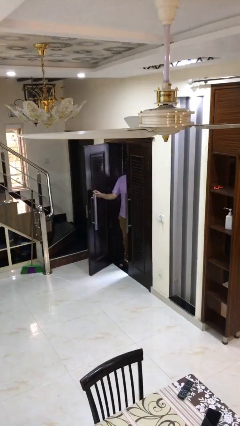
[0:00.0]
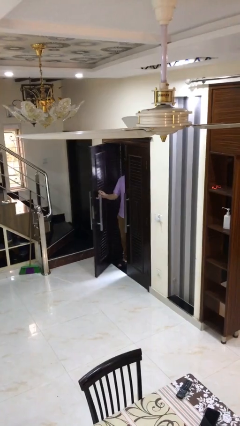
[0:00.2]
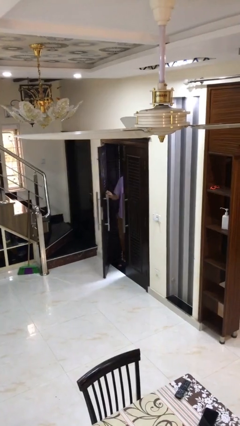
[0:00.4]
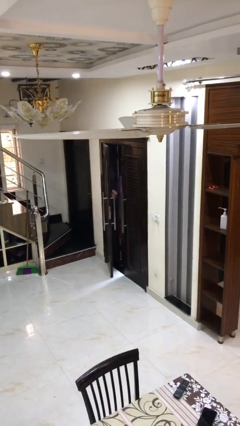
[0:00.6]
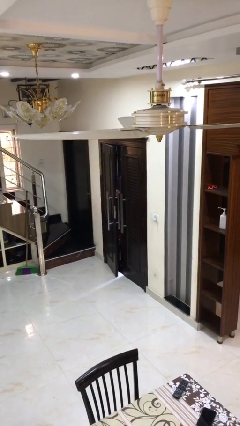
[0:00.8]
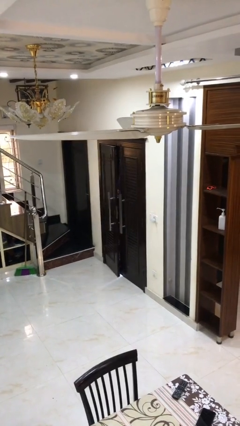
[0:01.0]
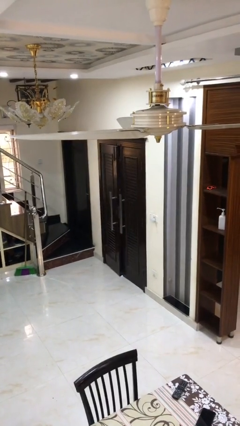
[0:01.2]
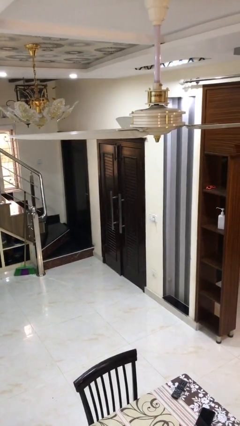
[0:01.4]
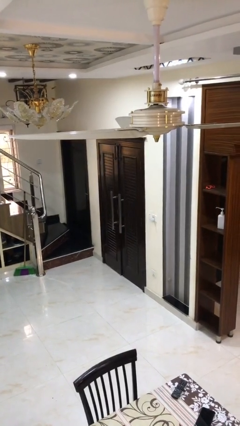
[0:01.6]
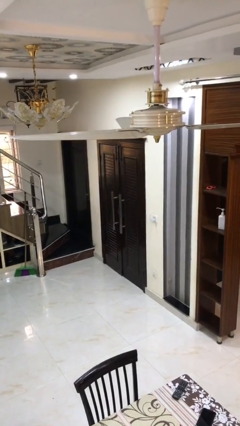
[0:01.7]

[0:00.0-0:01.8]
person closes facility door

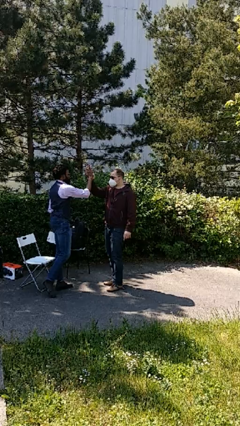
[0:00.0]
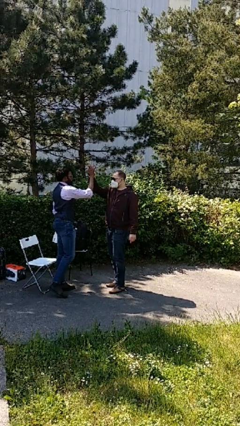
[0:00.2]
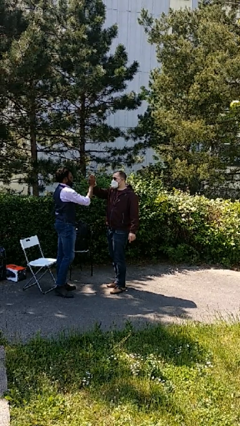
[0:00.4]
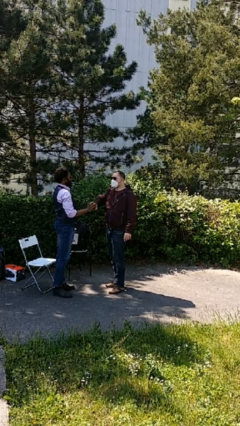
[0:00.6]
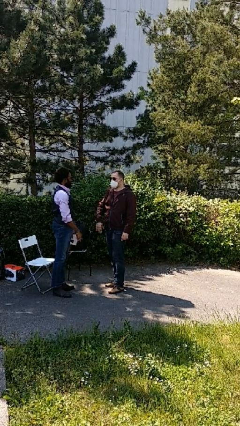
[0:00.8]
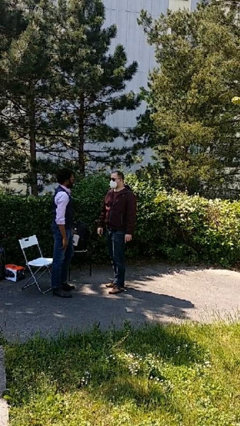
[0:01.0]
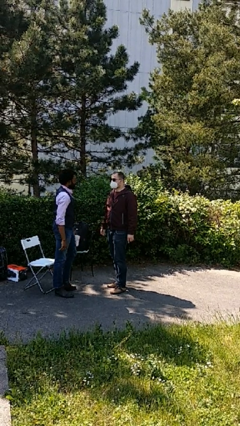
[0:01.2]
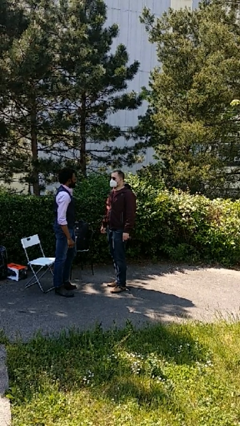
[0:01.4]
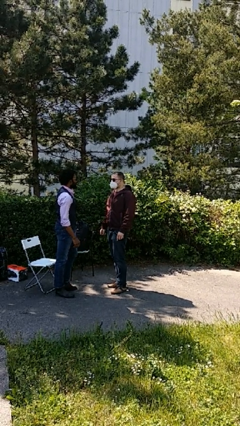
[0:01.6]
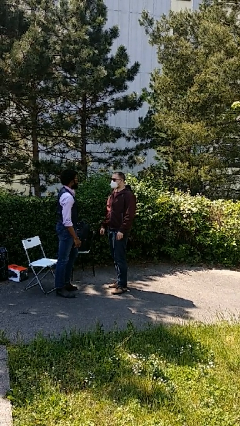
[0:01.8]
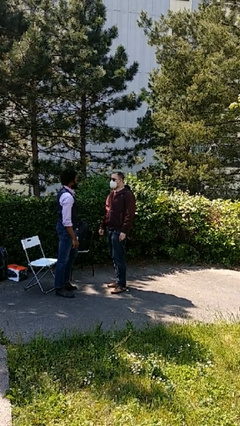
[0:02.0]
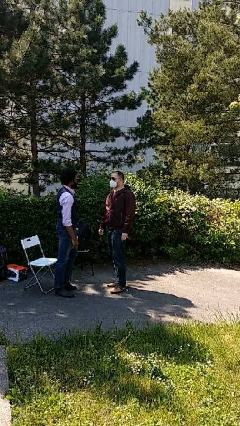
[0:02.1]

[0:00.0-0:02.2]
person highfives hand

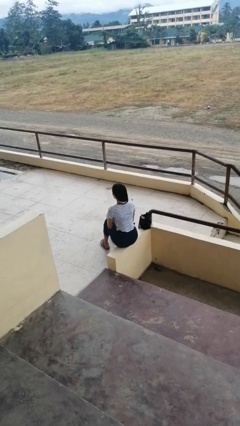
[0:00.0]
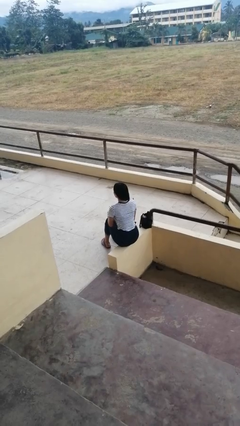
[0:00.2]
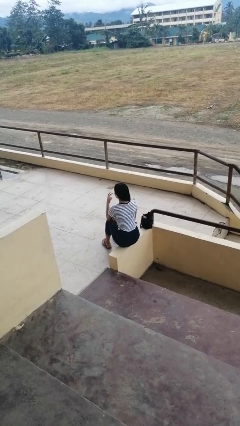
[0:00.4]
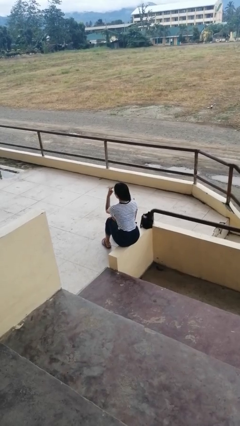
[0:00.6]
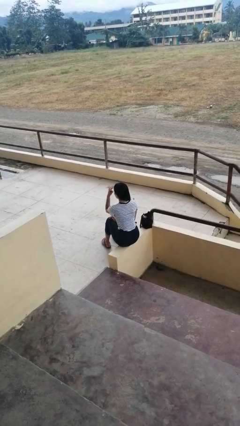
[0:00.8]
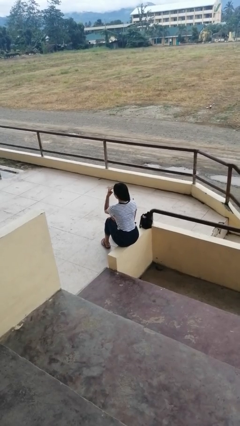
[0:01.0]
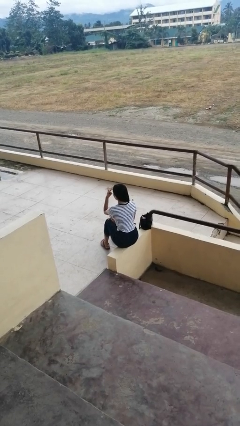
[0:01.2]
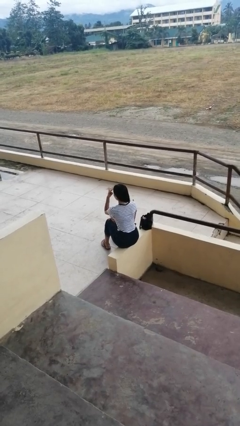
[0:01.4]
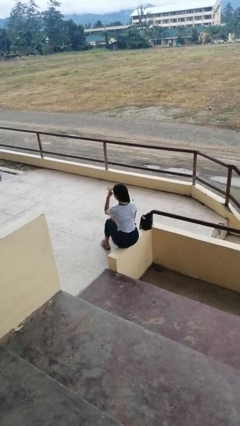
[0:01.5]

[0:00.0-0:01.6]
person gestures watch closely

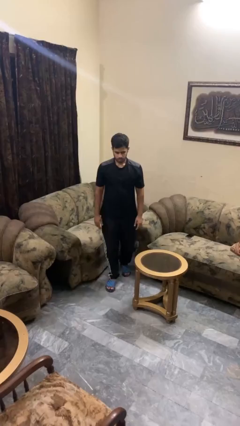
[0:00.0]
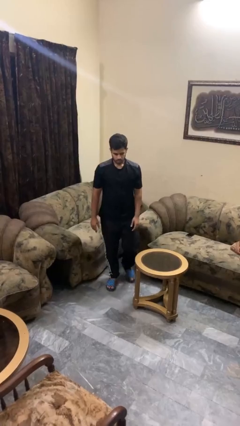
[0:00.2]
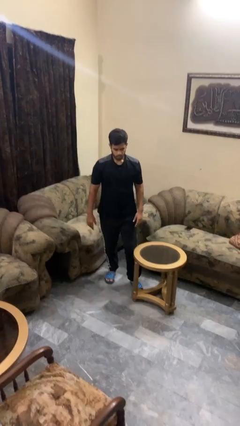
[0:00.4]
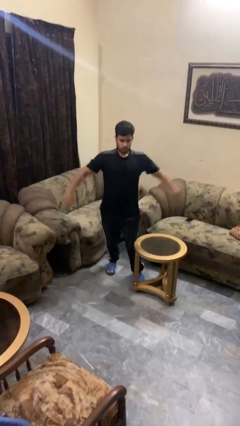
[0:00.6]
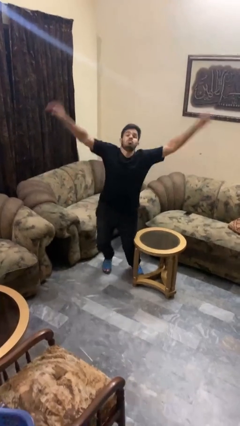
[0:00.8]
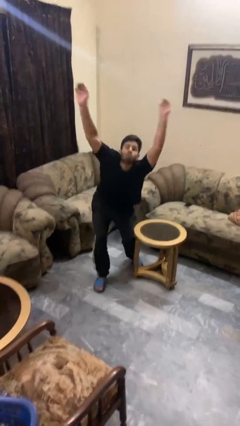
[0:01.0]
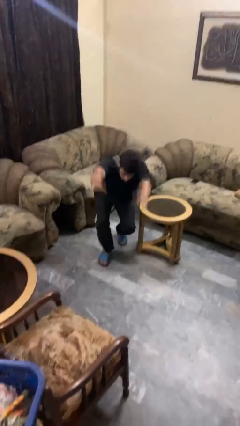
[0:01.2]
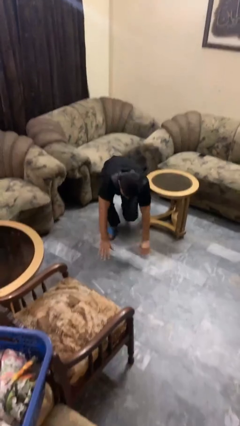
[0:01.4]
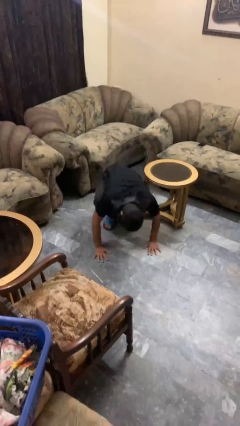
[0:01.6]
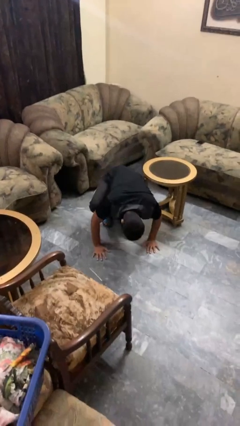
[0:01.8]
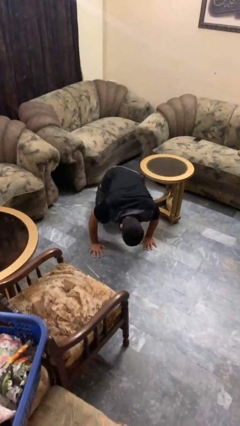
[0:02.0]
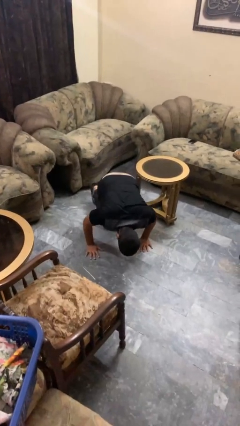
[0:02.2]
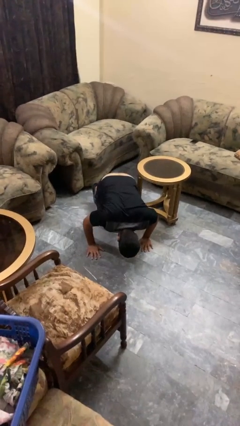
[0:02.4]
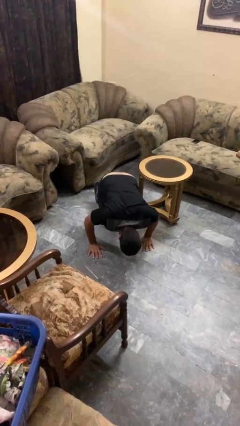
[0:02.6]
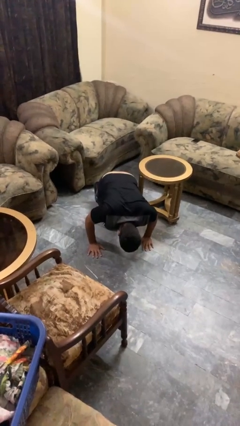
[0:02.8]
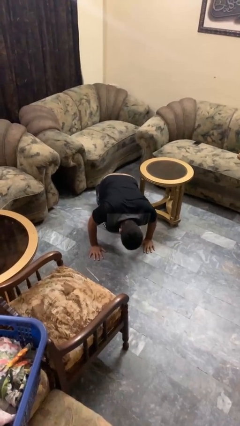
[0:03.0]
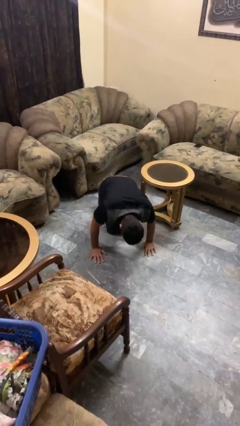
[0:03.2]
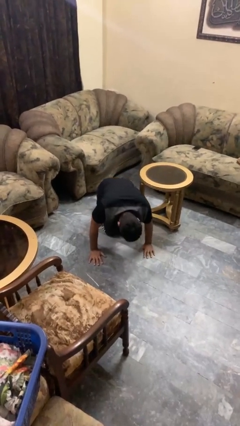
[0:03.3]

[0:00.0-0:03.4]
person trips on object on floor

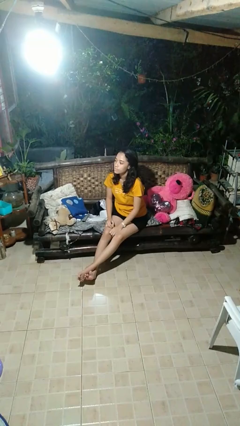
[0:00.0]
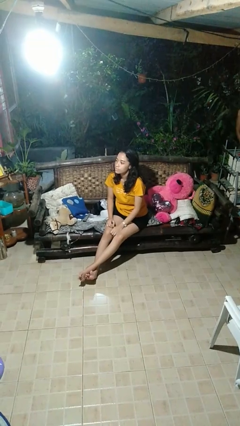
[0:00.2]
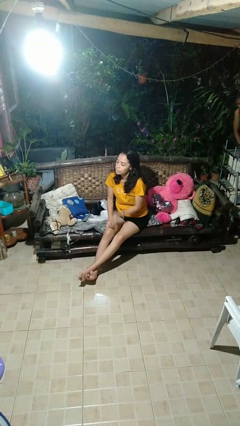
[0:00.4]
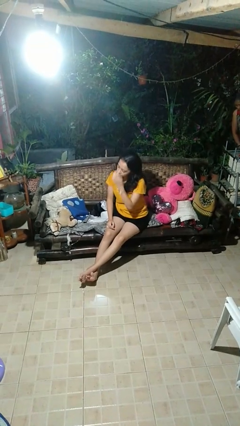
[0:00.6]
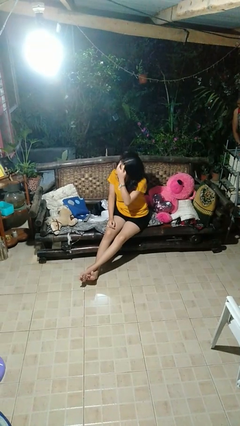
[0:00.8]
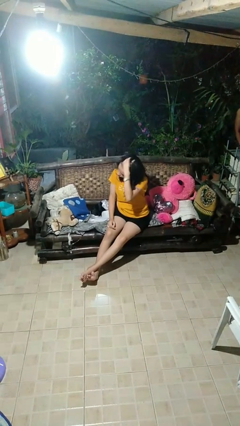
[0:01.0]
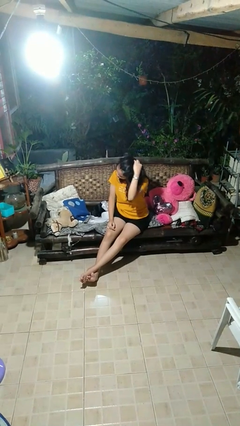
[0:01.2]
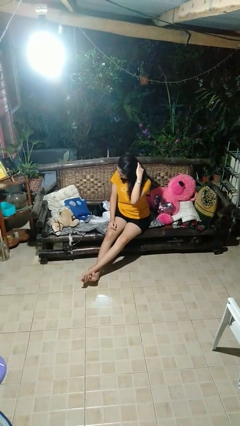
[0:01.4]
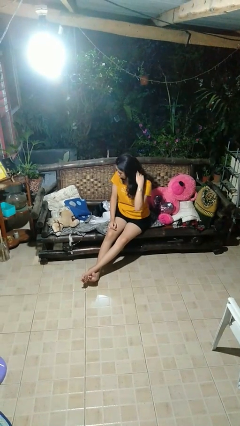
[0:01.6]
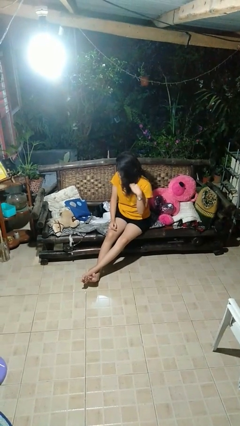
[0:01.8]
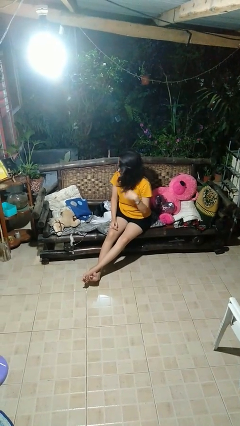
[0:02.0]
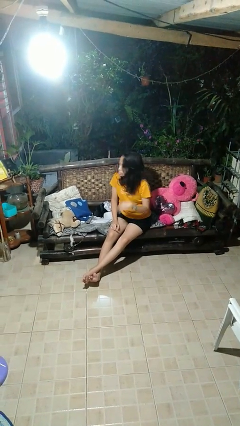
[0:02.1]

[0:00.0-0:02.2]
person strokes hair

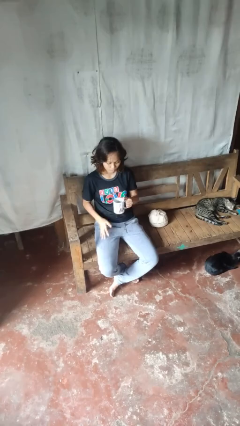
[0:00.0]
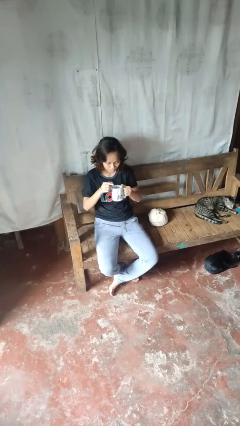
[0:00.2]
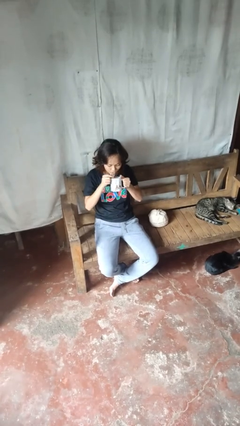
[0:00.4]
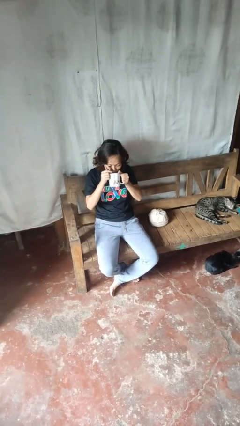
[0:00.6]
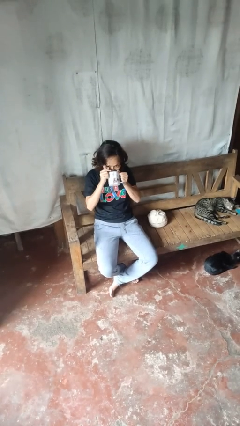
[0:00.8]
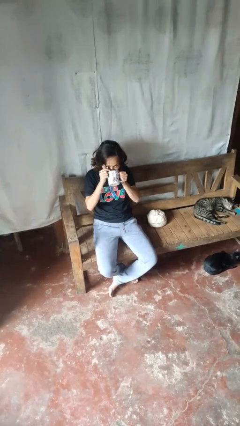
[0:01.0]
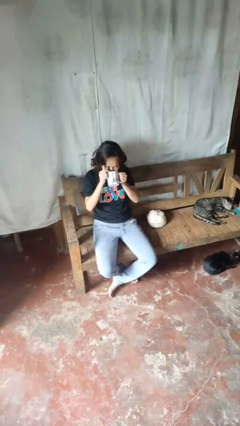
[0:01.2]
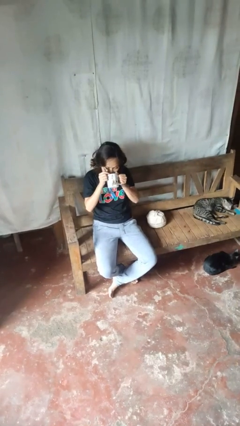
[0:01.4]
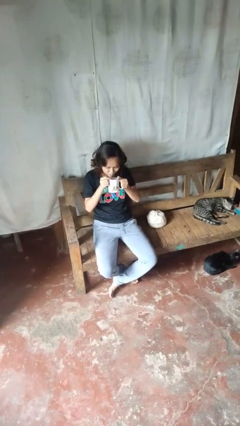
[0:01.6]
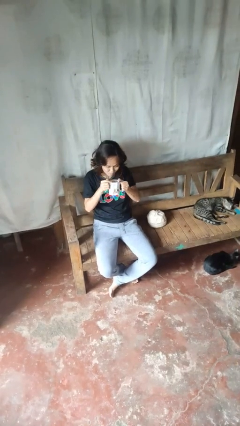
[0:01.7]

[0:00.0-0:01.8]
person drinks from mug

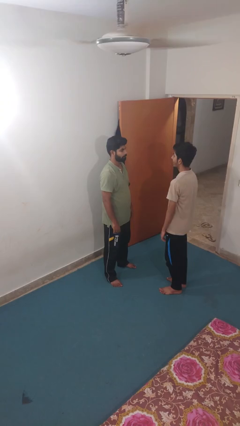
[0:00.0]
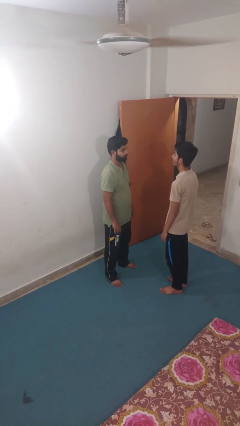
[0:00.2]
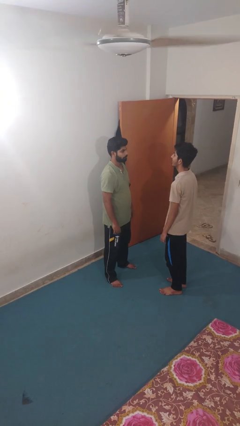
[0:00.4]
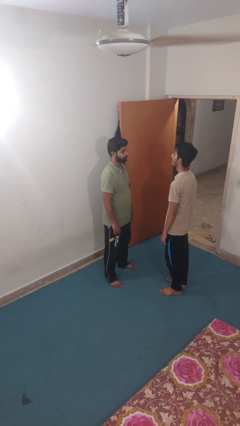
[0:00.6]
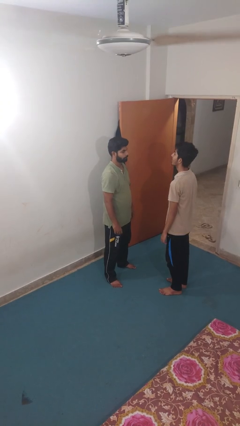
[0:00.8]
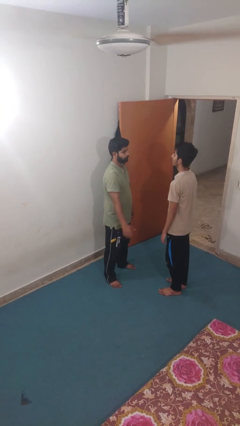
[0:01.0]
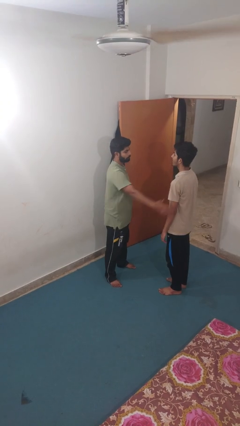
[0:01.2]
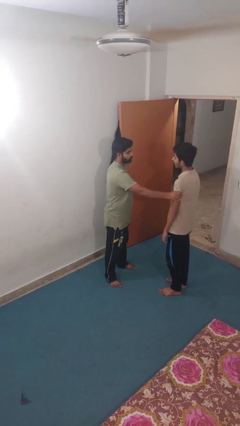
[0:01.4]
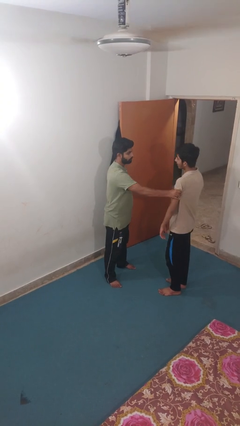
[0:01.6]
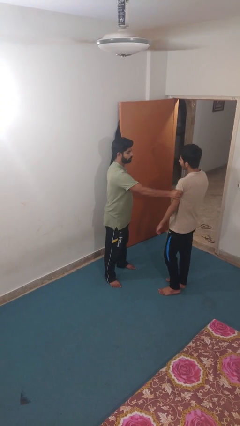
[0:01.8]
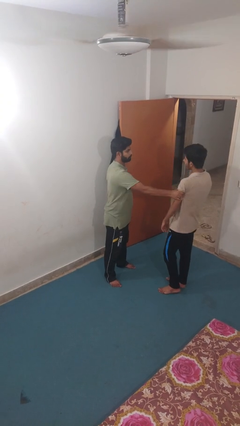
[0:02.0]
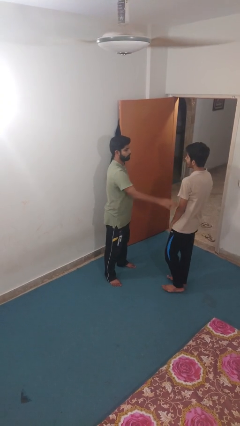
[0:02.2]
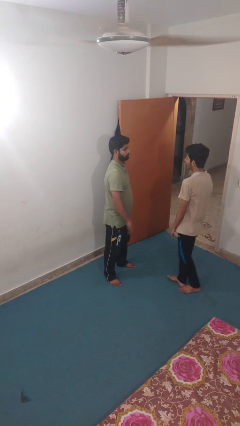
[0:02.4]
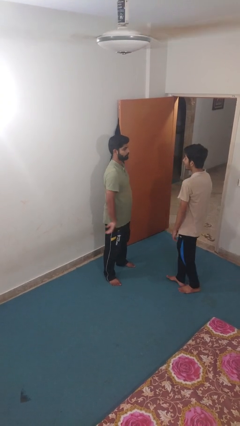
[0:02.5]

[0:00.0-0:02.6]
person grabs person by bicep

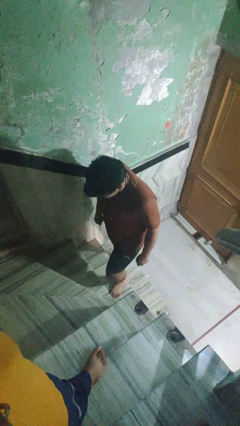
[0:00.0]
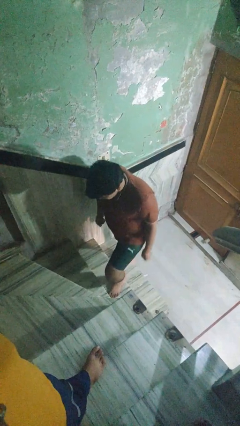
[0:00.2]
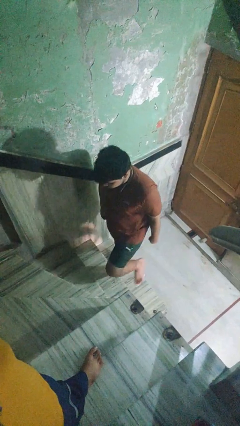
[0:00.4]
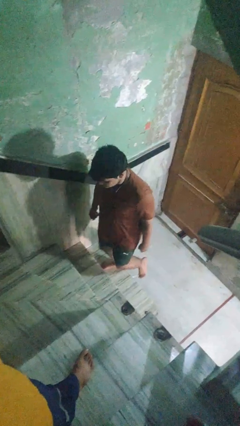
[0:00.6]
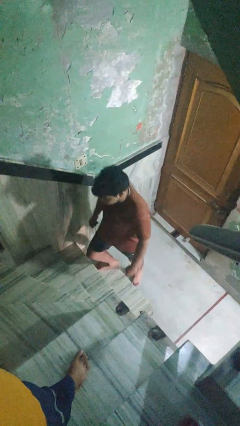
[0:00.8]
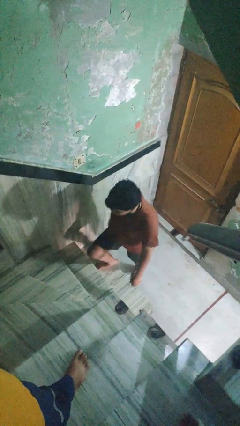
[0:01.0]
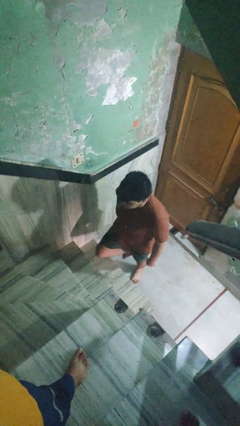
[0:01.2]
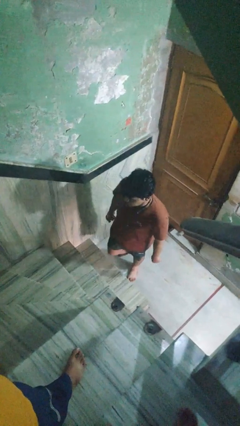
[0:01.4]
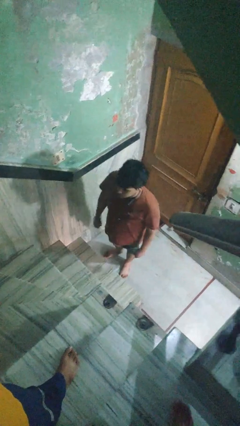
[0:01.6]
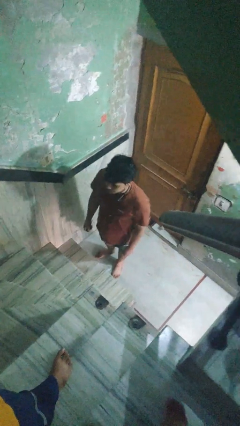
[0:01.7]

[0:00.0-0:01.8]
person climbs down stairs
